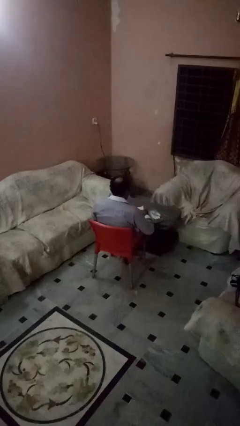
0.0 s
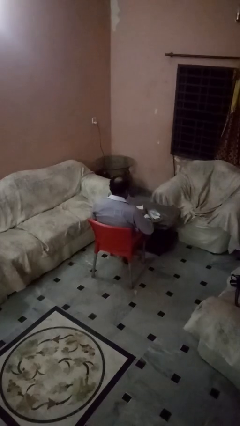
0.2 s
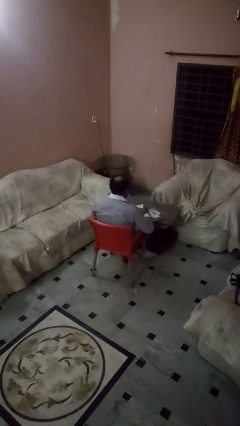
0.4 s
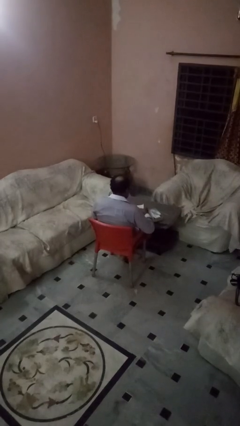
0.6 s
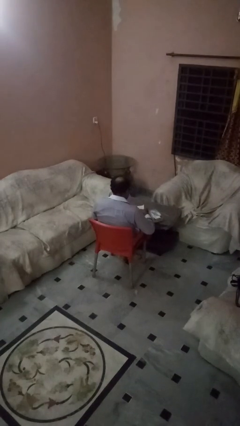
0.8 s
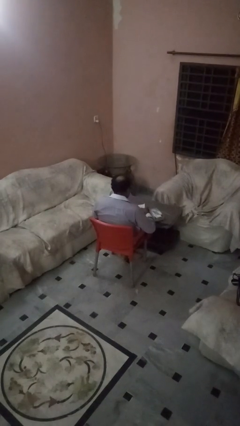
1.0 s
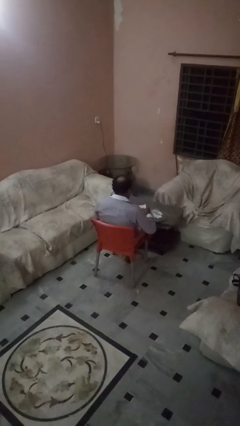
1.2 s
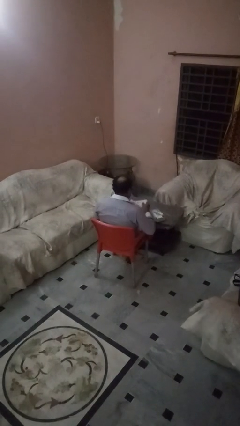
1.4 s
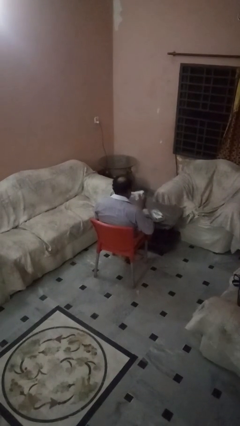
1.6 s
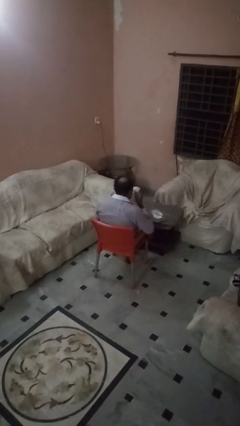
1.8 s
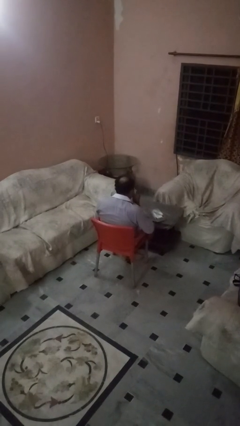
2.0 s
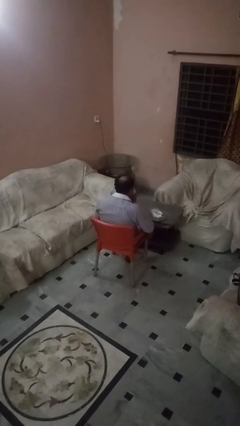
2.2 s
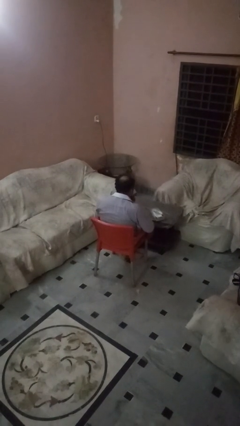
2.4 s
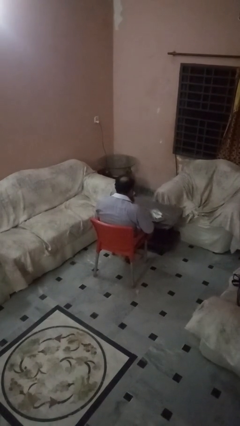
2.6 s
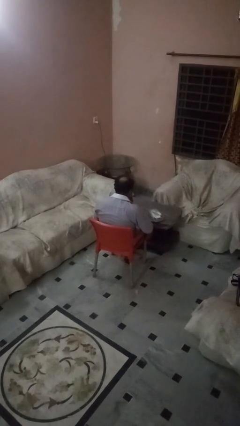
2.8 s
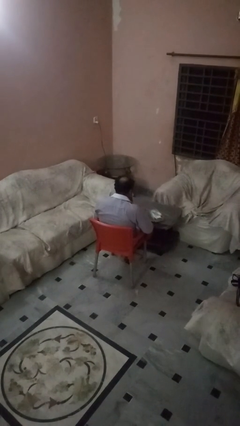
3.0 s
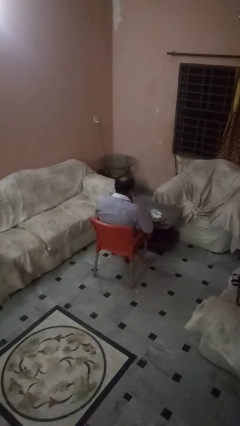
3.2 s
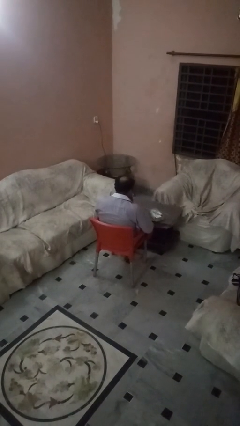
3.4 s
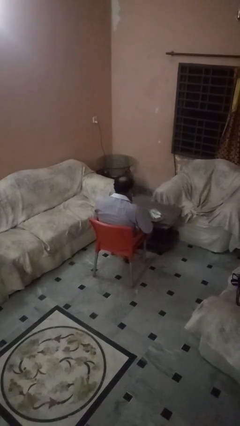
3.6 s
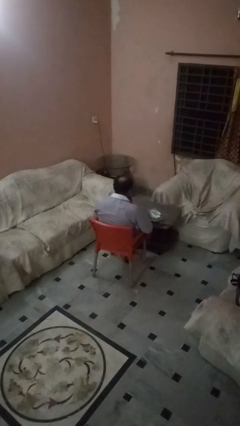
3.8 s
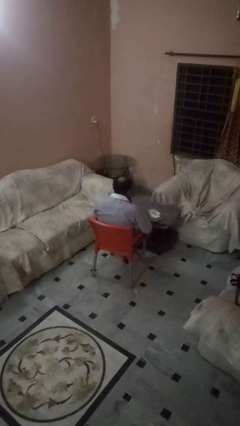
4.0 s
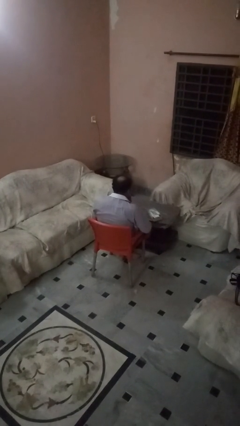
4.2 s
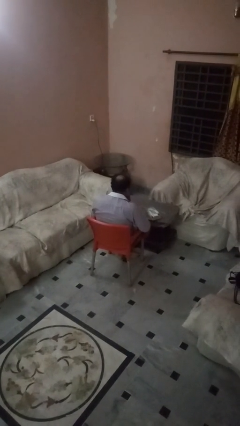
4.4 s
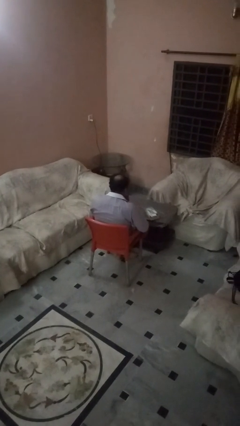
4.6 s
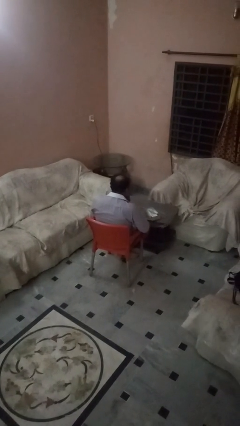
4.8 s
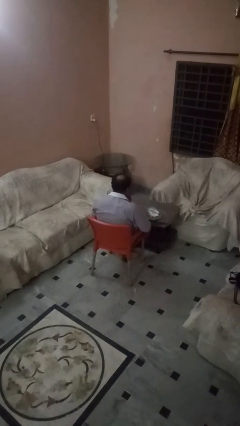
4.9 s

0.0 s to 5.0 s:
person blows nose

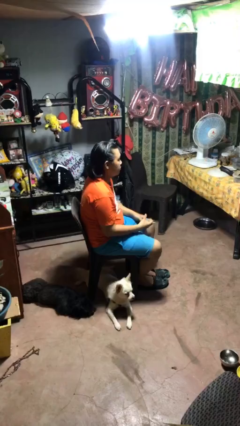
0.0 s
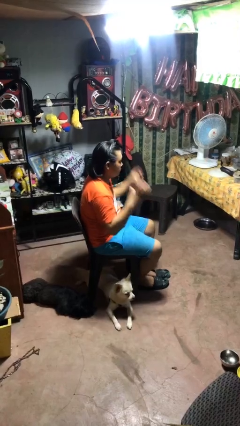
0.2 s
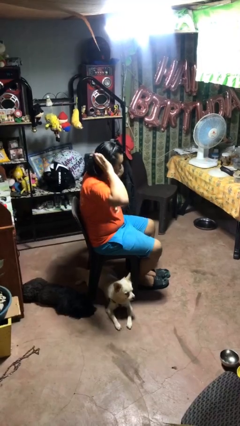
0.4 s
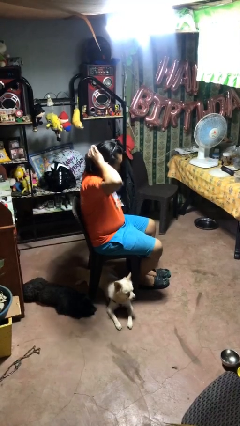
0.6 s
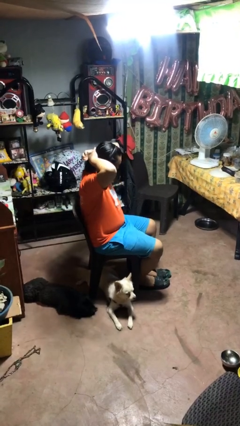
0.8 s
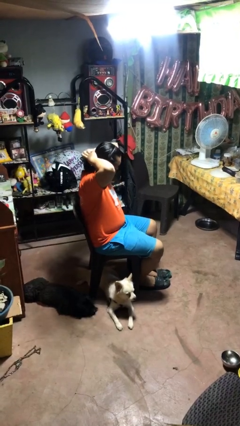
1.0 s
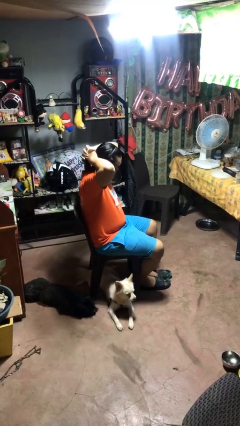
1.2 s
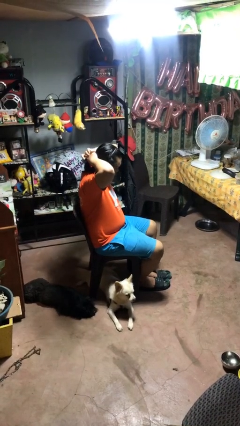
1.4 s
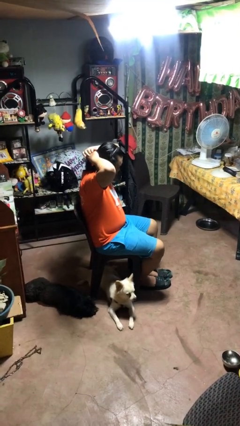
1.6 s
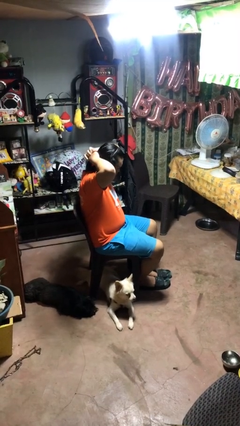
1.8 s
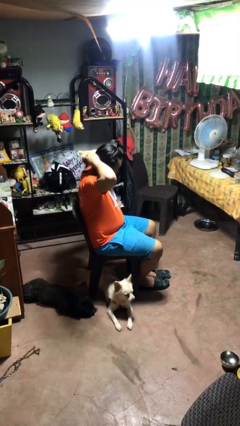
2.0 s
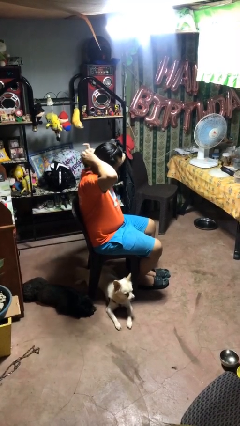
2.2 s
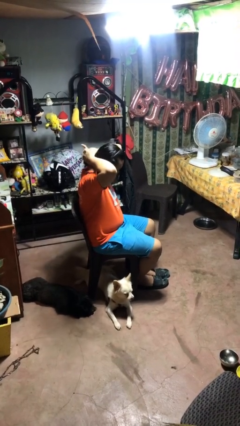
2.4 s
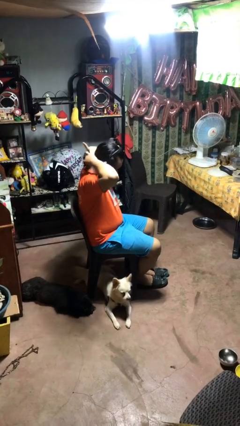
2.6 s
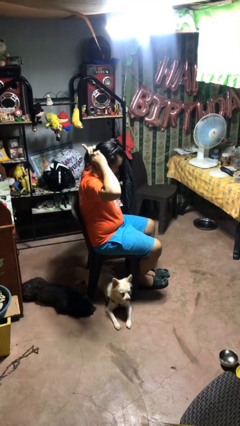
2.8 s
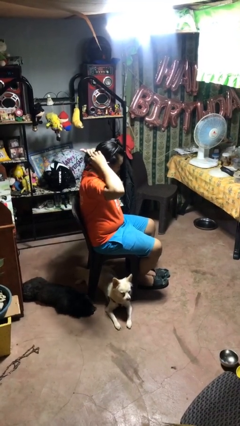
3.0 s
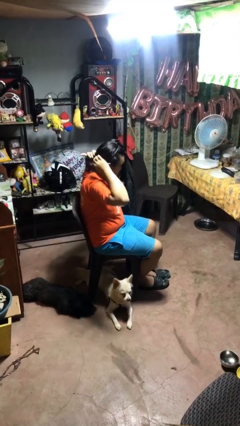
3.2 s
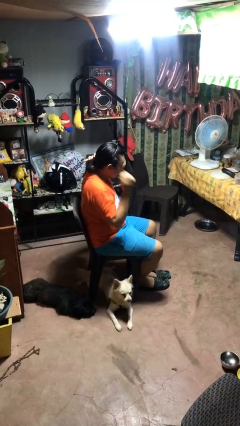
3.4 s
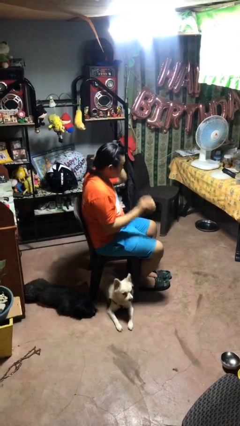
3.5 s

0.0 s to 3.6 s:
person puts hair in ponytail

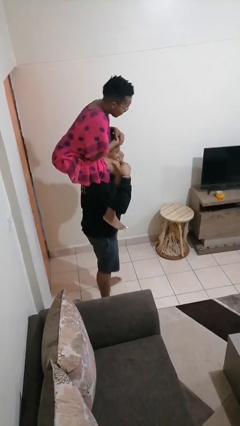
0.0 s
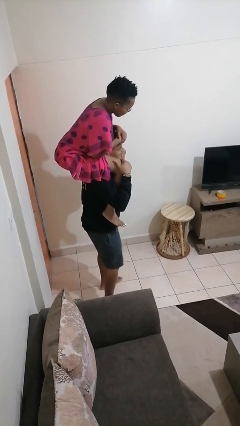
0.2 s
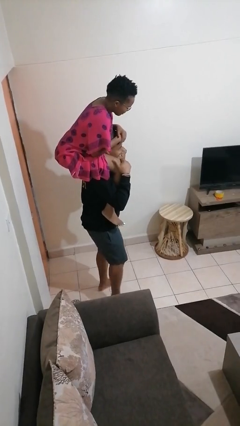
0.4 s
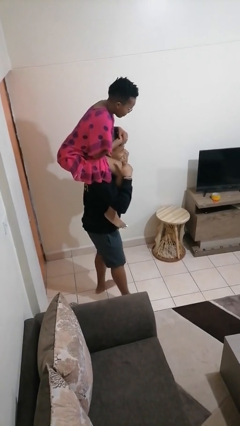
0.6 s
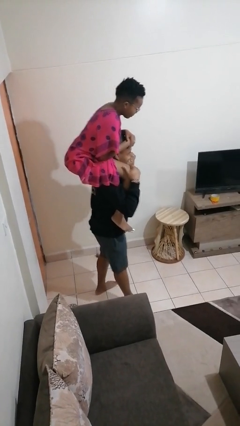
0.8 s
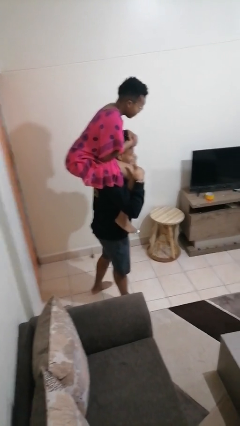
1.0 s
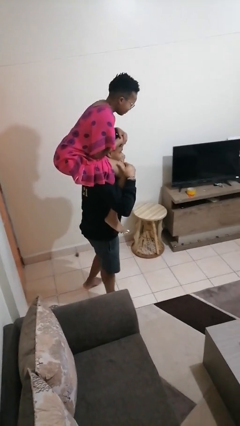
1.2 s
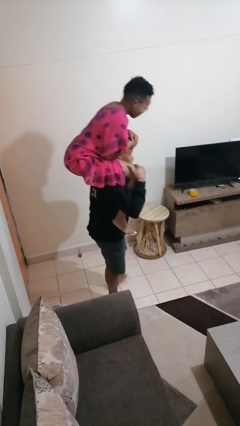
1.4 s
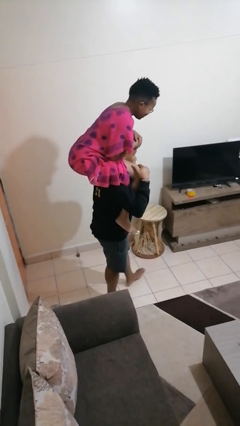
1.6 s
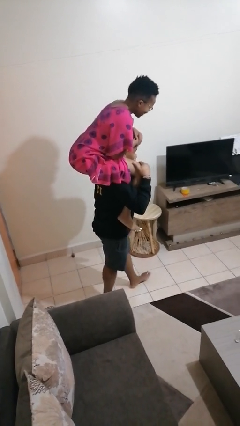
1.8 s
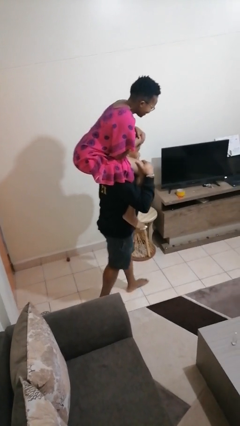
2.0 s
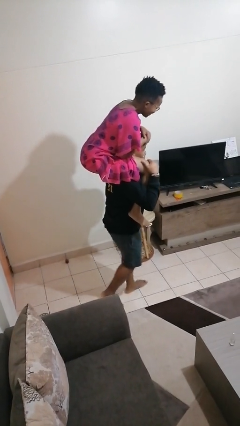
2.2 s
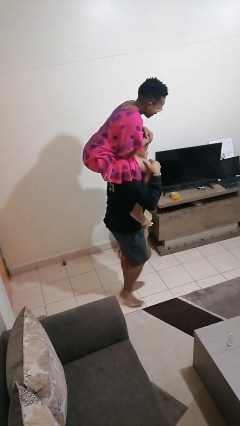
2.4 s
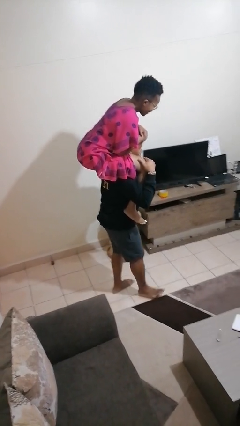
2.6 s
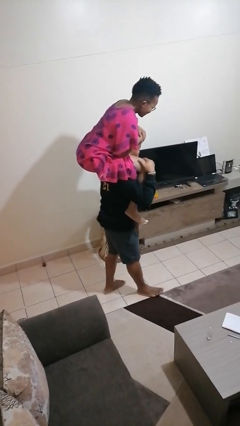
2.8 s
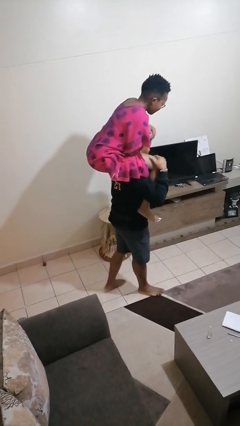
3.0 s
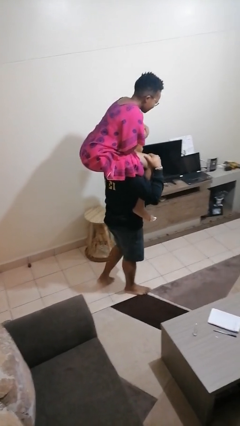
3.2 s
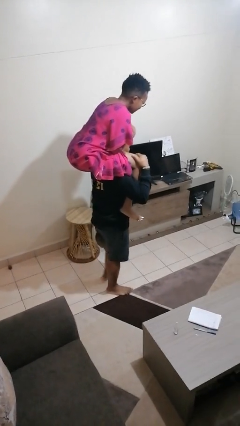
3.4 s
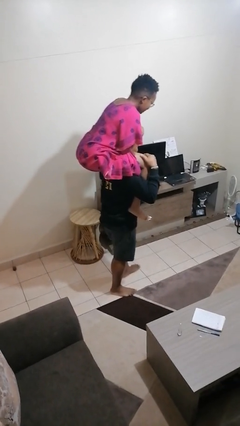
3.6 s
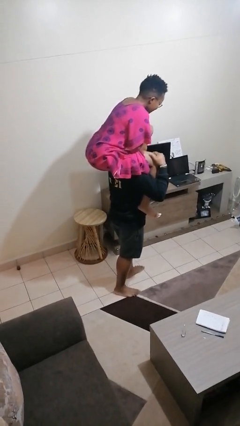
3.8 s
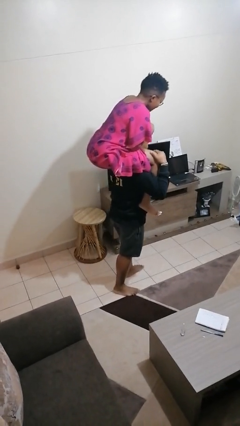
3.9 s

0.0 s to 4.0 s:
person carries person on shoulders

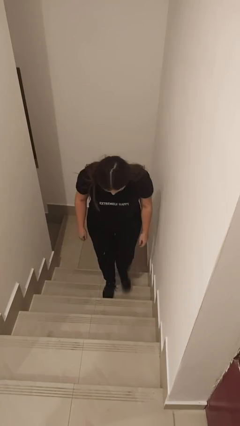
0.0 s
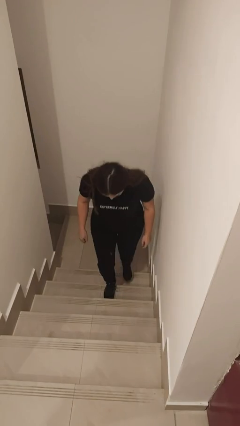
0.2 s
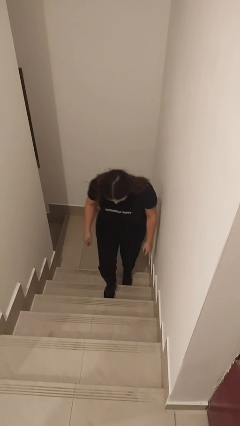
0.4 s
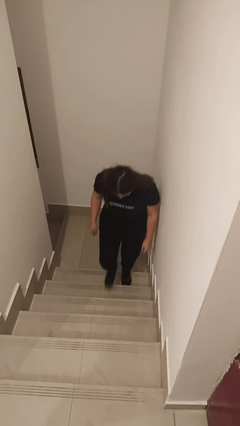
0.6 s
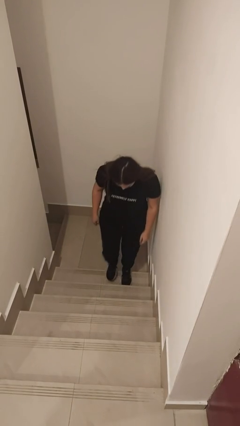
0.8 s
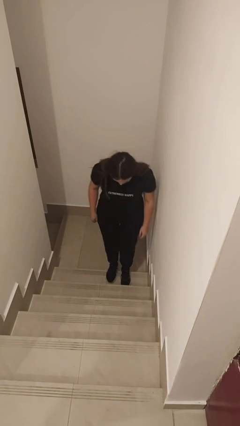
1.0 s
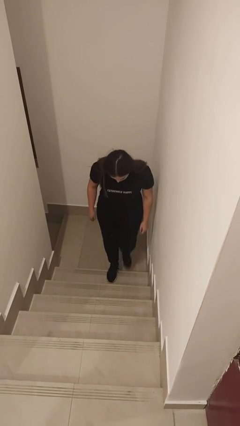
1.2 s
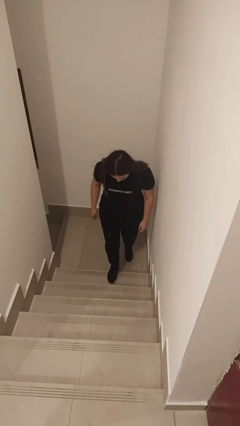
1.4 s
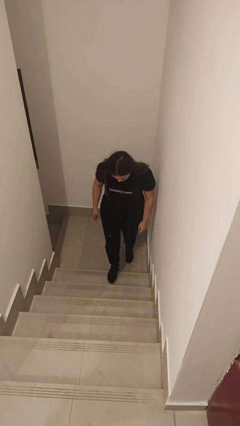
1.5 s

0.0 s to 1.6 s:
person climbs down stairs

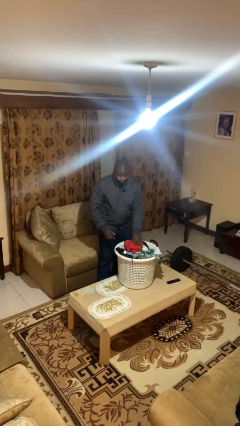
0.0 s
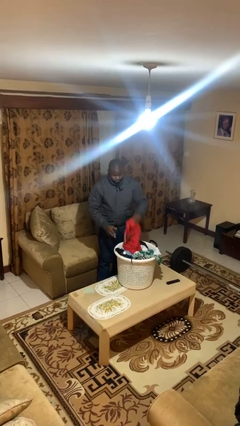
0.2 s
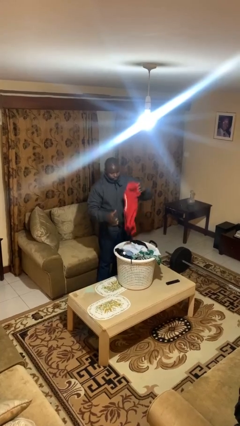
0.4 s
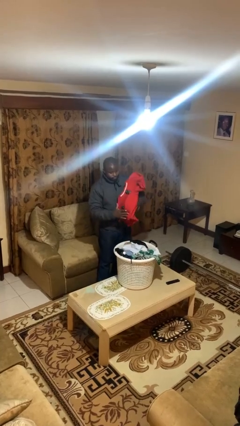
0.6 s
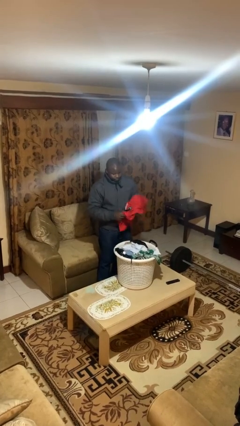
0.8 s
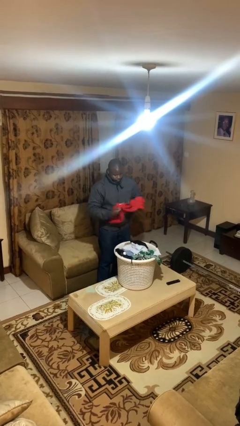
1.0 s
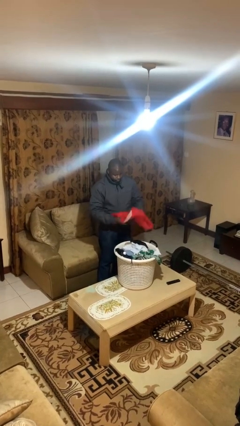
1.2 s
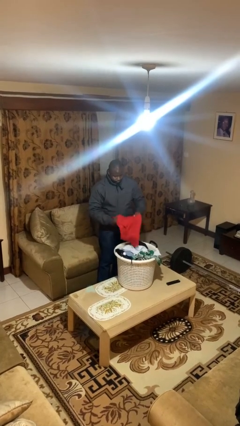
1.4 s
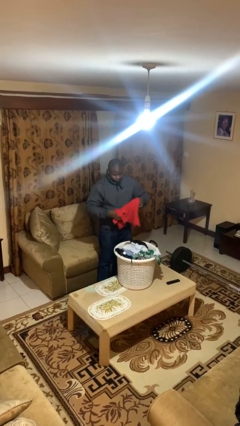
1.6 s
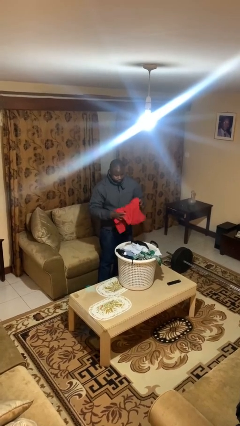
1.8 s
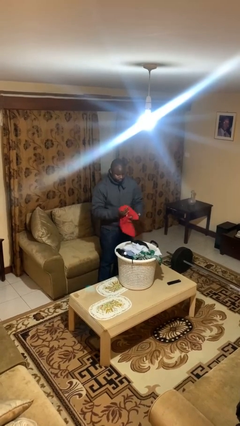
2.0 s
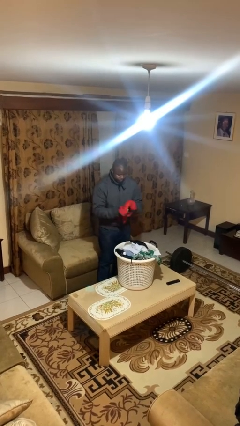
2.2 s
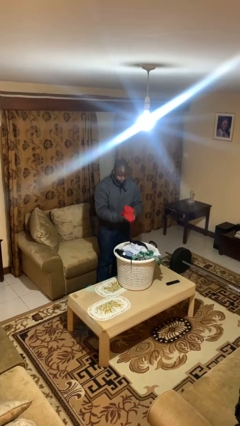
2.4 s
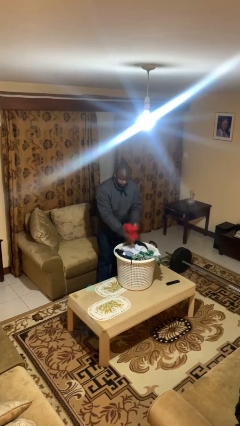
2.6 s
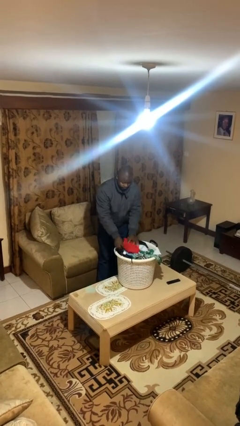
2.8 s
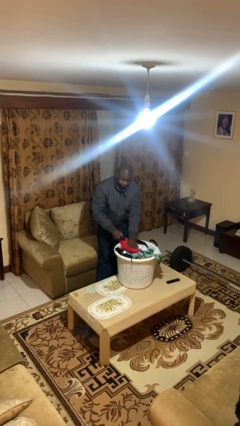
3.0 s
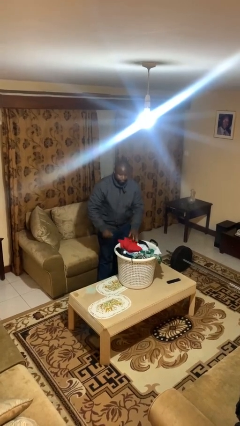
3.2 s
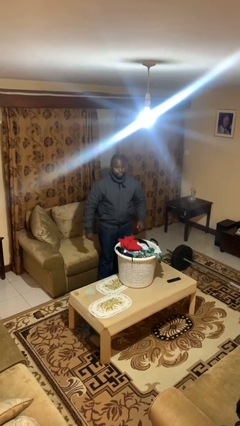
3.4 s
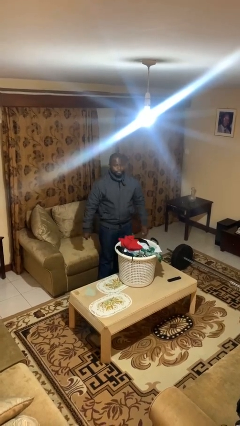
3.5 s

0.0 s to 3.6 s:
person folds shirt
